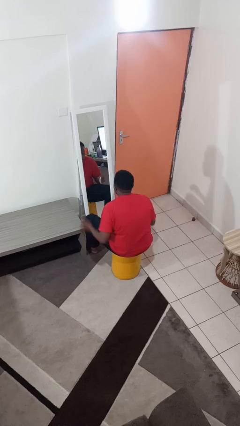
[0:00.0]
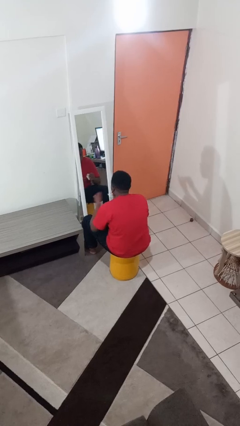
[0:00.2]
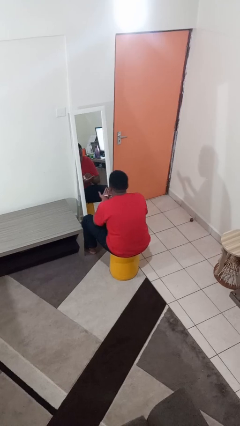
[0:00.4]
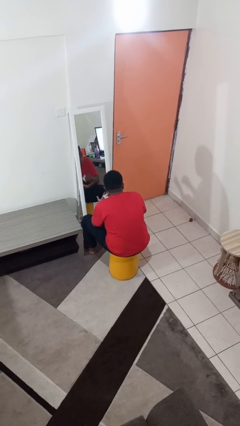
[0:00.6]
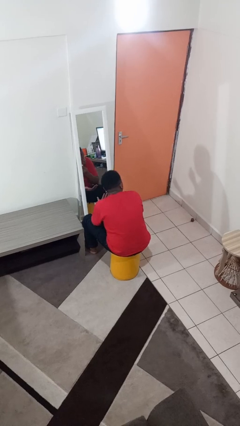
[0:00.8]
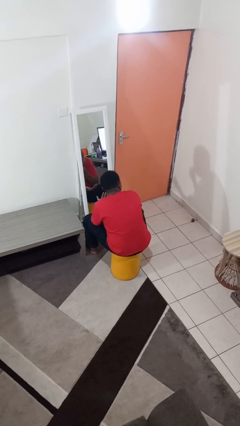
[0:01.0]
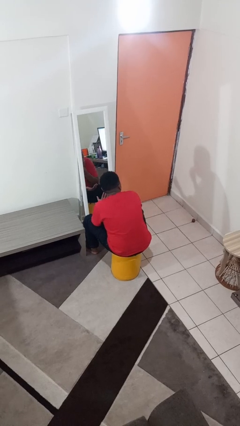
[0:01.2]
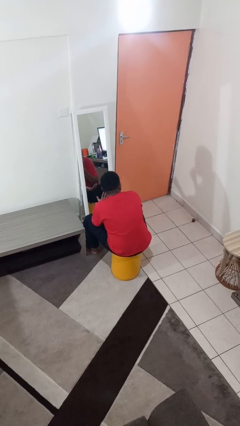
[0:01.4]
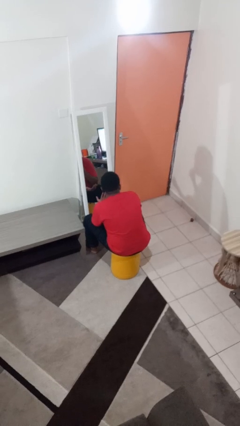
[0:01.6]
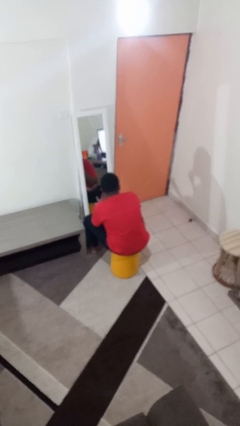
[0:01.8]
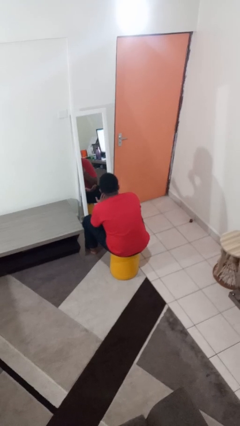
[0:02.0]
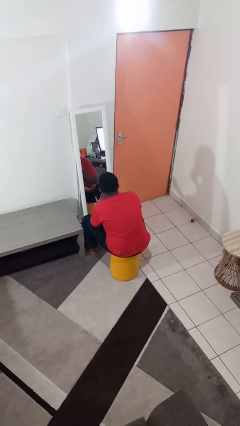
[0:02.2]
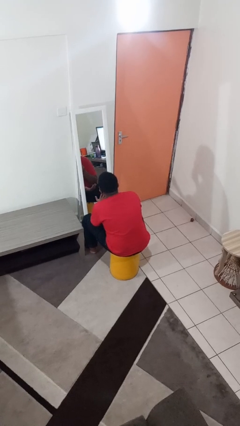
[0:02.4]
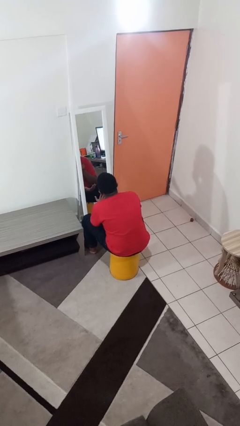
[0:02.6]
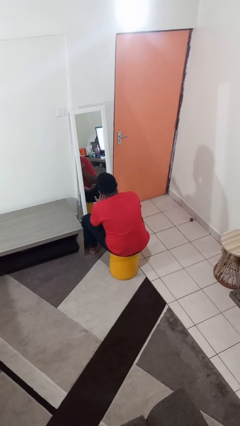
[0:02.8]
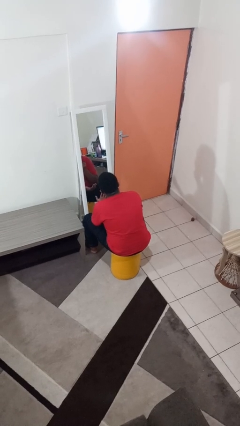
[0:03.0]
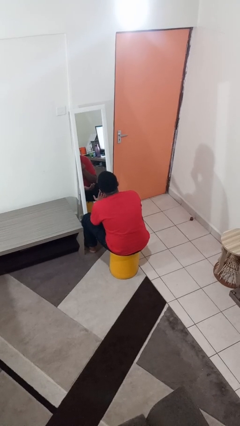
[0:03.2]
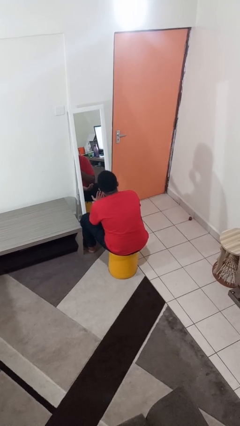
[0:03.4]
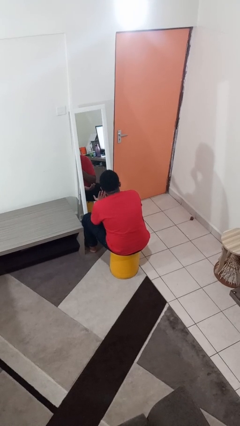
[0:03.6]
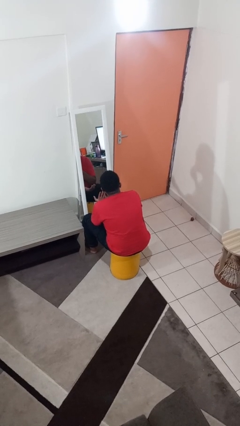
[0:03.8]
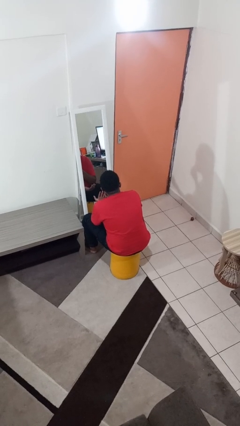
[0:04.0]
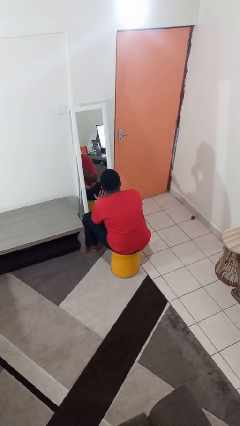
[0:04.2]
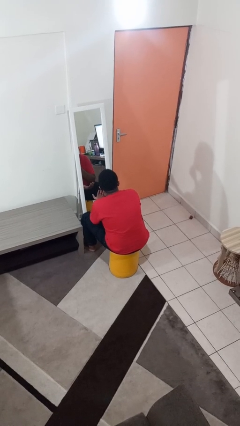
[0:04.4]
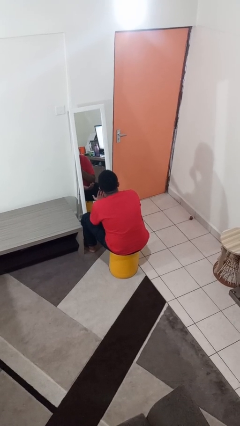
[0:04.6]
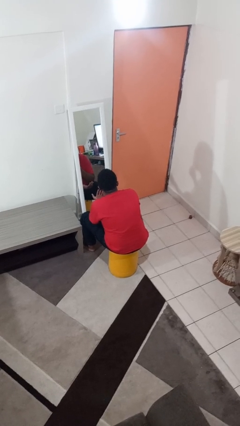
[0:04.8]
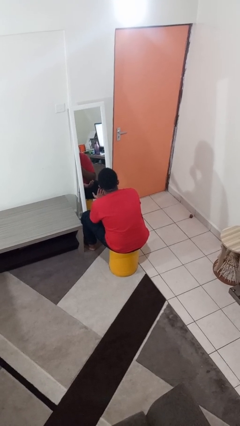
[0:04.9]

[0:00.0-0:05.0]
person applies foundation makeup

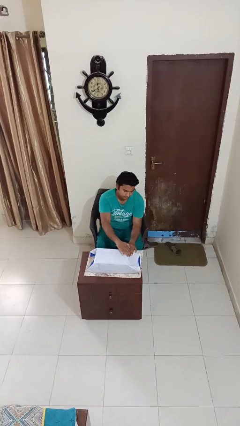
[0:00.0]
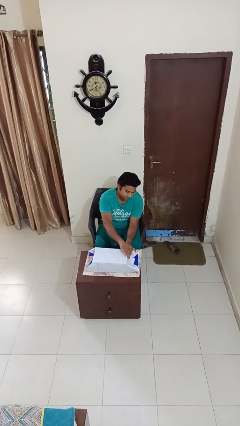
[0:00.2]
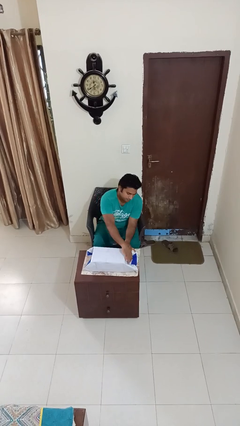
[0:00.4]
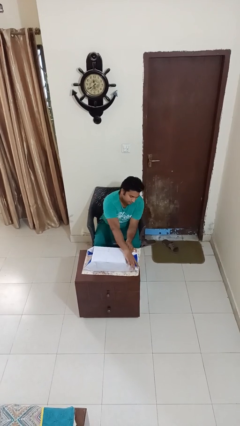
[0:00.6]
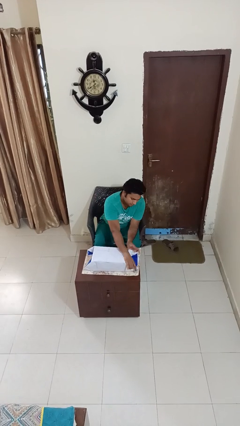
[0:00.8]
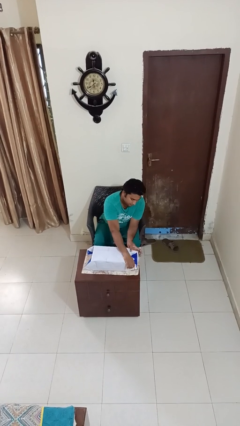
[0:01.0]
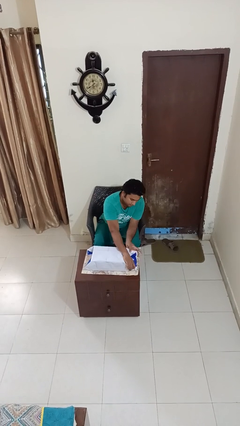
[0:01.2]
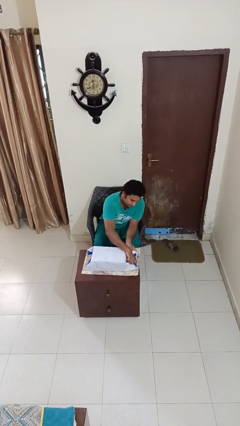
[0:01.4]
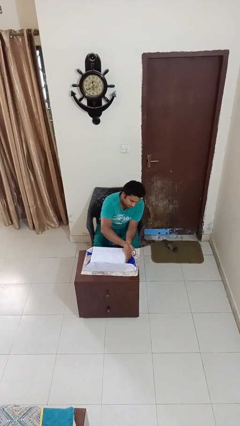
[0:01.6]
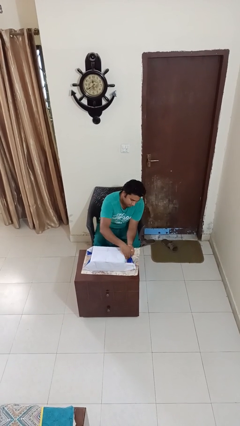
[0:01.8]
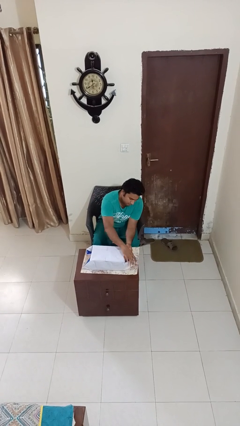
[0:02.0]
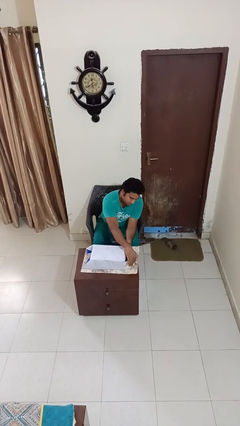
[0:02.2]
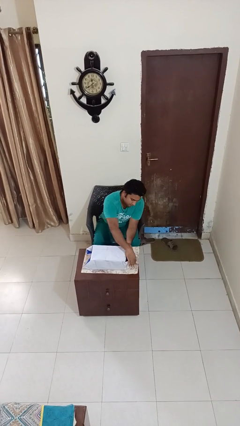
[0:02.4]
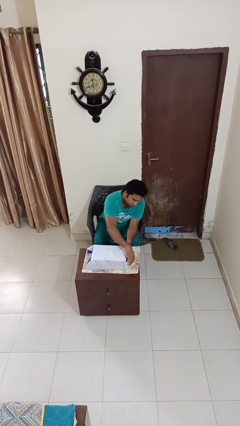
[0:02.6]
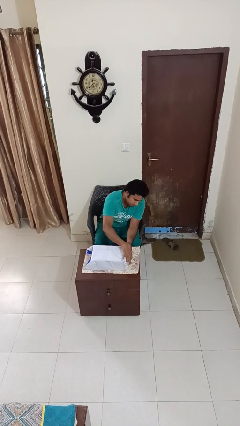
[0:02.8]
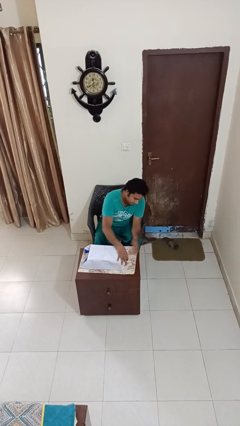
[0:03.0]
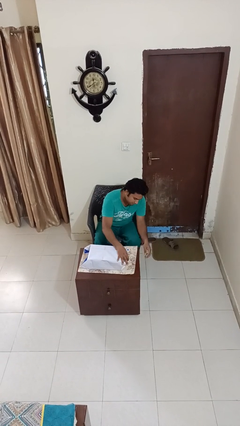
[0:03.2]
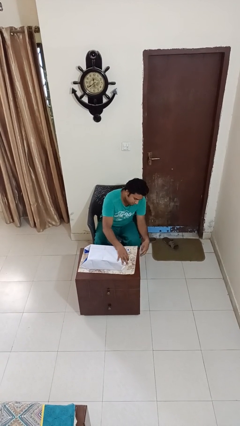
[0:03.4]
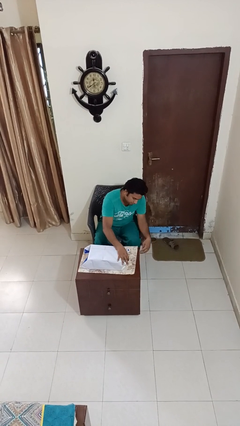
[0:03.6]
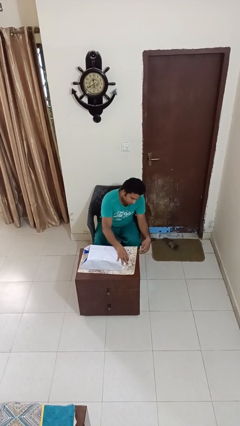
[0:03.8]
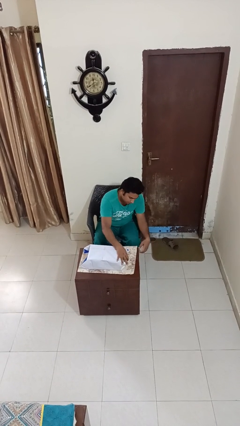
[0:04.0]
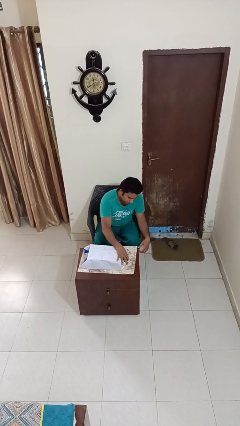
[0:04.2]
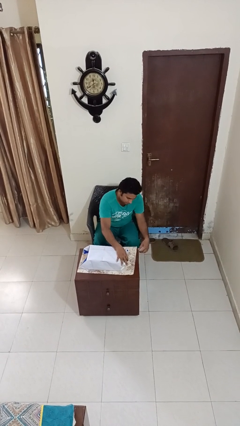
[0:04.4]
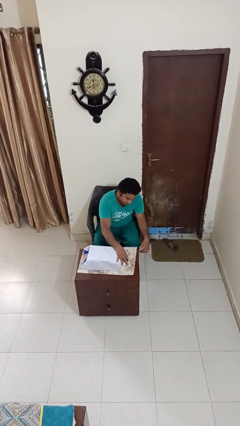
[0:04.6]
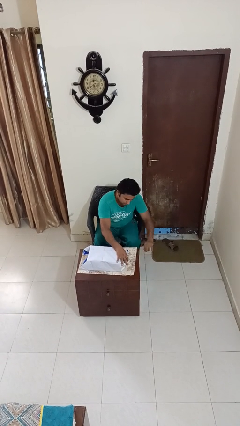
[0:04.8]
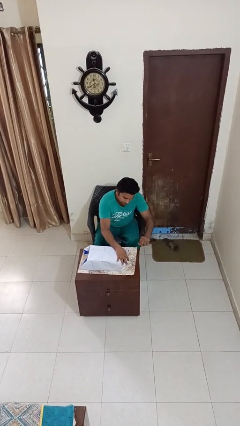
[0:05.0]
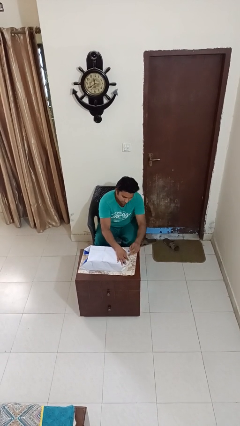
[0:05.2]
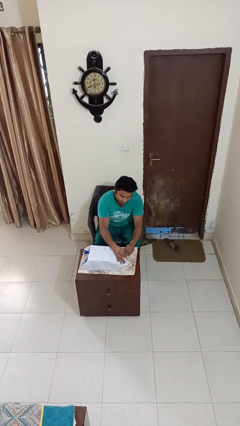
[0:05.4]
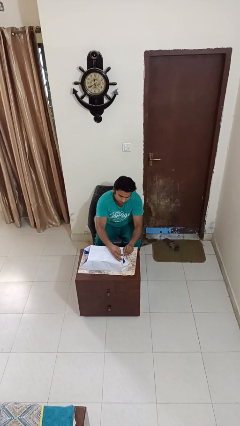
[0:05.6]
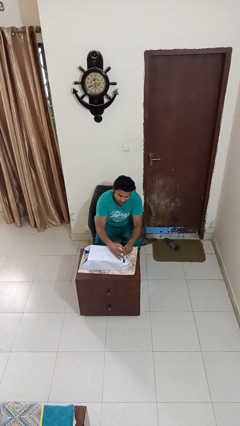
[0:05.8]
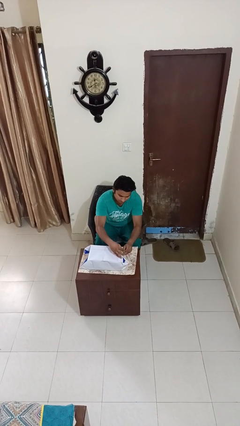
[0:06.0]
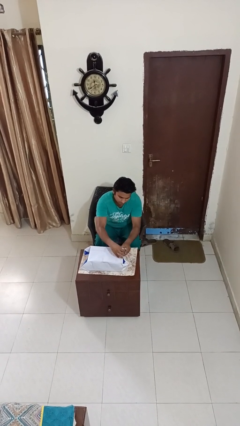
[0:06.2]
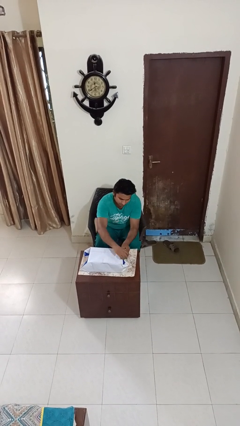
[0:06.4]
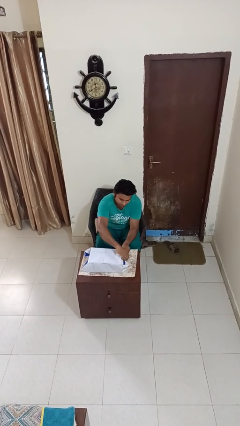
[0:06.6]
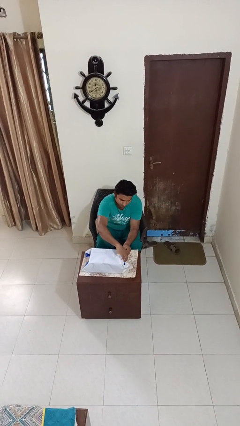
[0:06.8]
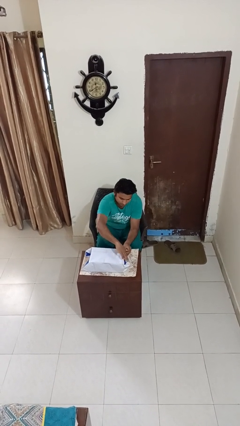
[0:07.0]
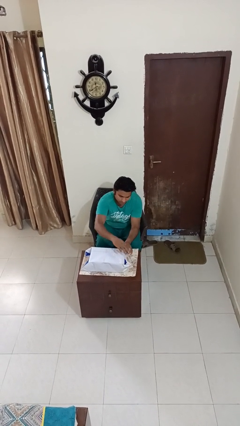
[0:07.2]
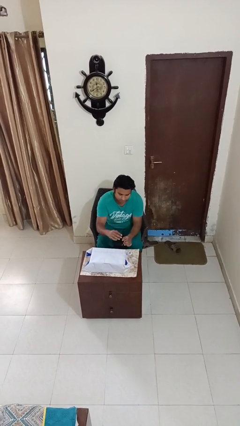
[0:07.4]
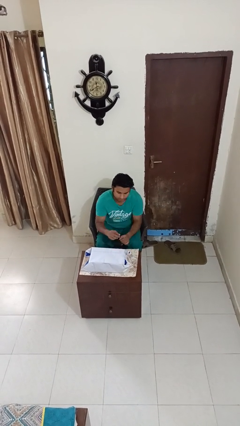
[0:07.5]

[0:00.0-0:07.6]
person wraps box

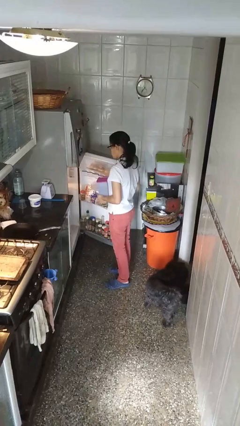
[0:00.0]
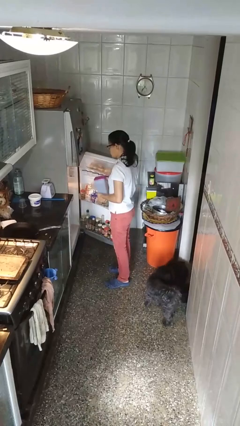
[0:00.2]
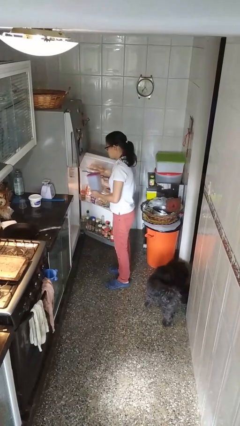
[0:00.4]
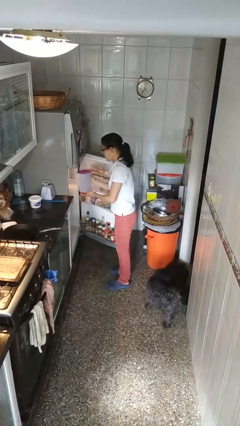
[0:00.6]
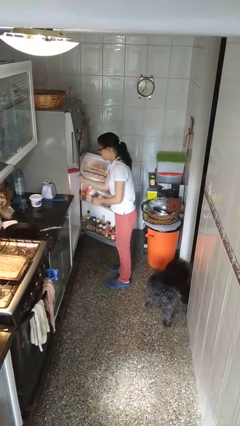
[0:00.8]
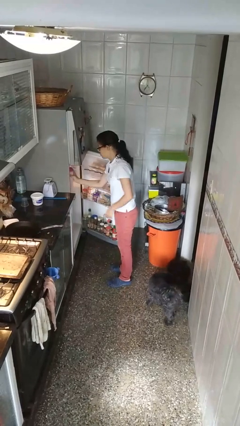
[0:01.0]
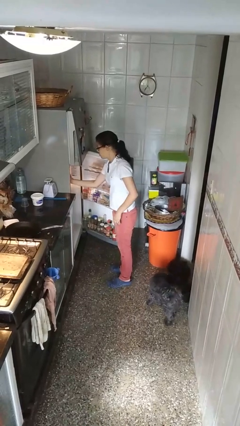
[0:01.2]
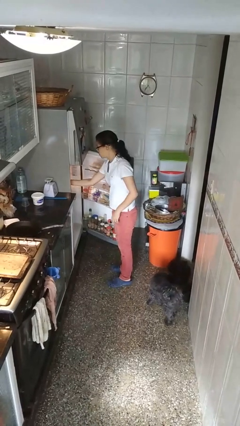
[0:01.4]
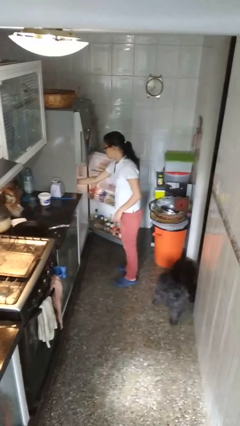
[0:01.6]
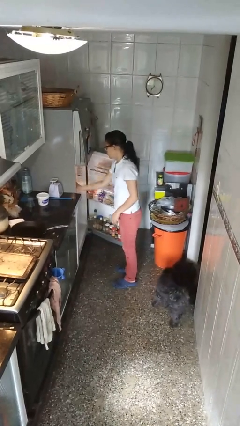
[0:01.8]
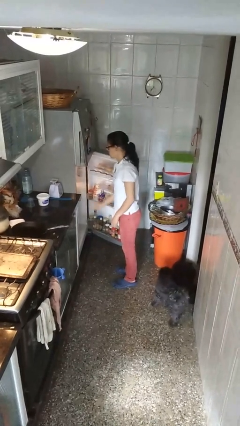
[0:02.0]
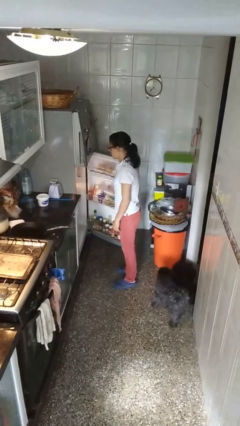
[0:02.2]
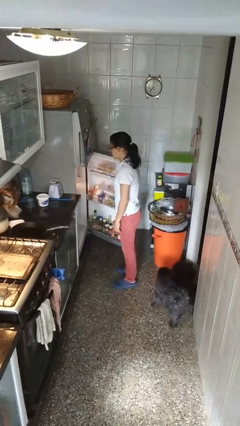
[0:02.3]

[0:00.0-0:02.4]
person puts object into refrigerator

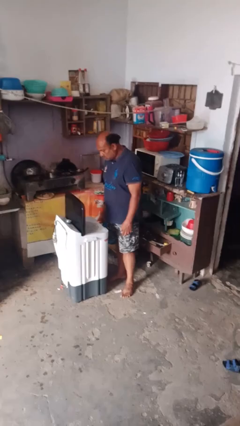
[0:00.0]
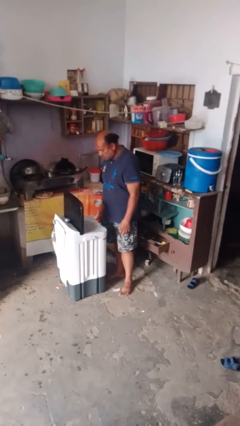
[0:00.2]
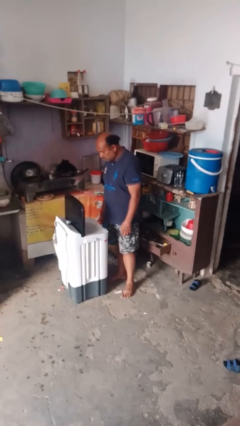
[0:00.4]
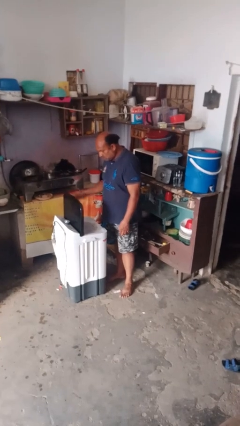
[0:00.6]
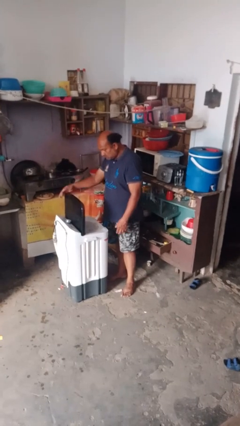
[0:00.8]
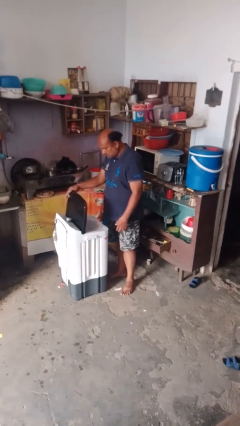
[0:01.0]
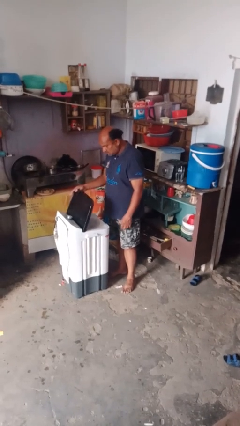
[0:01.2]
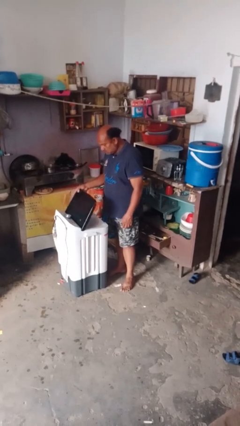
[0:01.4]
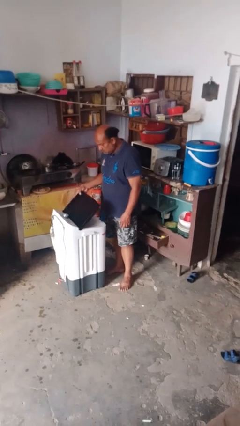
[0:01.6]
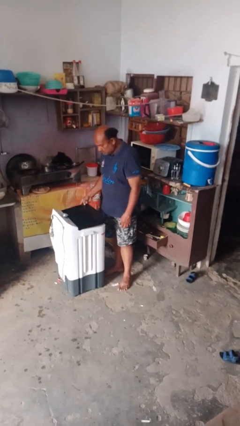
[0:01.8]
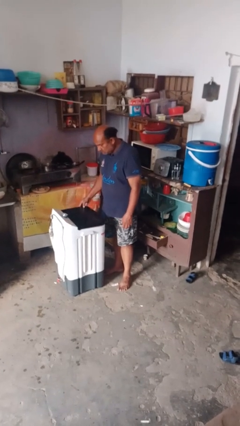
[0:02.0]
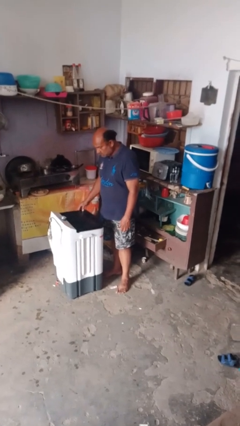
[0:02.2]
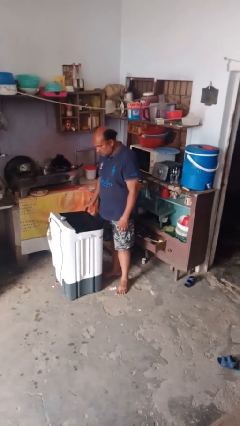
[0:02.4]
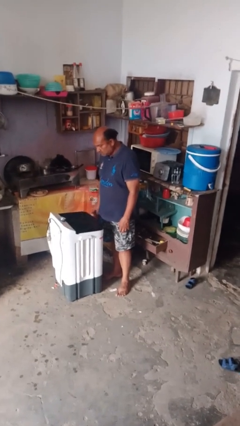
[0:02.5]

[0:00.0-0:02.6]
person closes clothes washer
